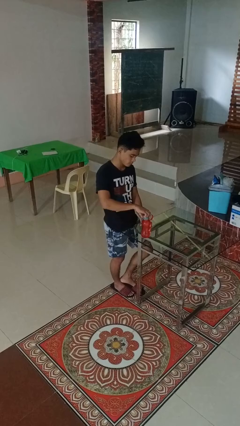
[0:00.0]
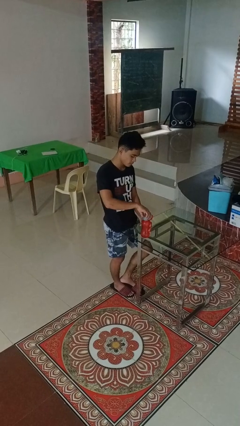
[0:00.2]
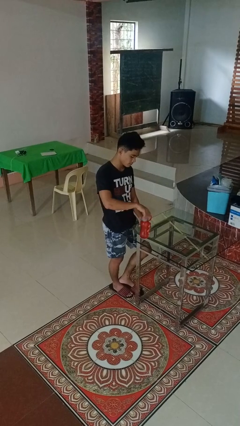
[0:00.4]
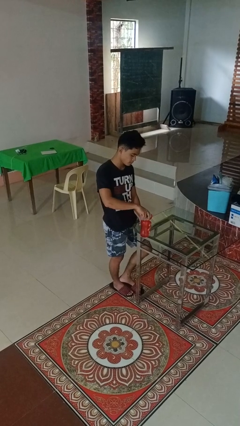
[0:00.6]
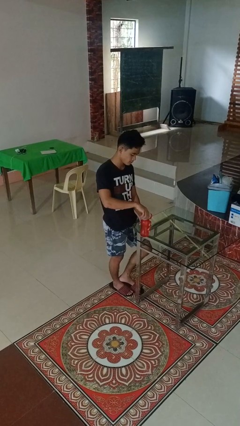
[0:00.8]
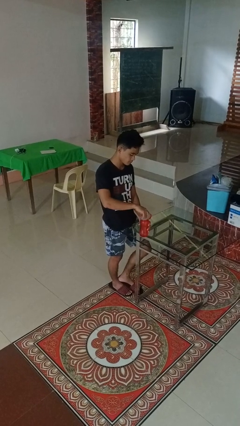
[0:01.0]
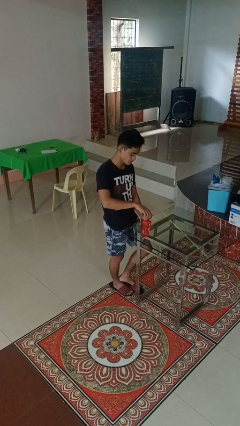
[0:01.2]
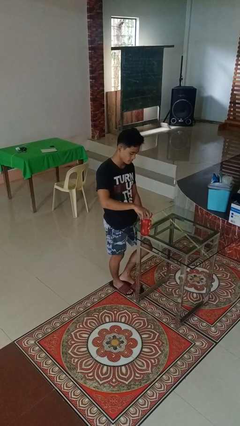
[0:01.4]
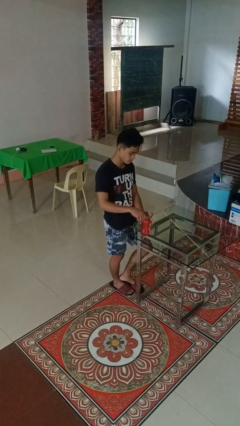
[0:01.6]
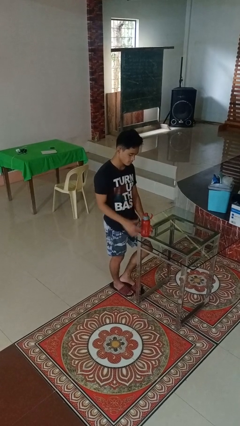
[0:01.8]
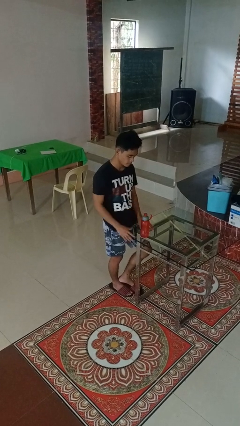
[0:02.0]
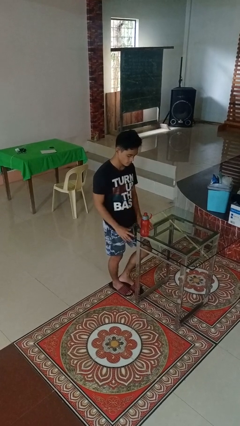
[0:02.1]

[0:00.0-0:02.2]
person screws lid to bottle

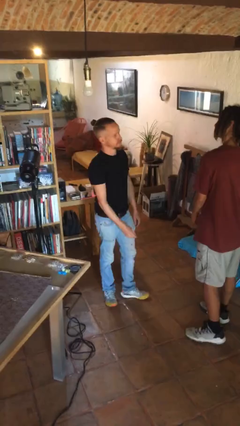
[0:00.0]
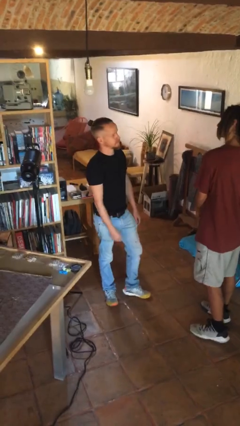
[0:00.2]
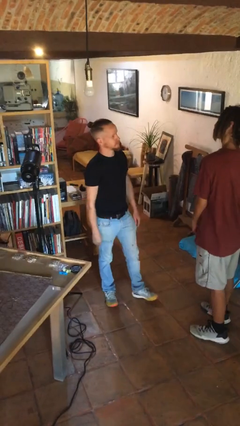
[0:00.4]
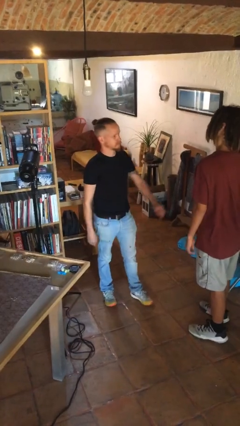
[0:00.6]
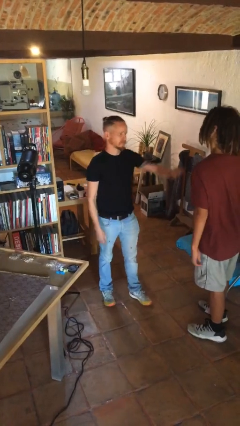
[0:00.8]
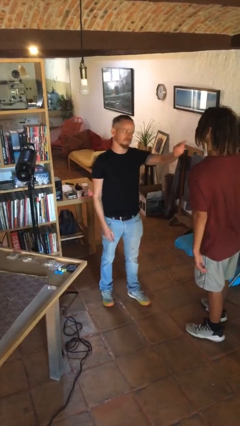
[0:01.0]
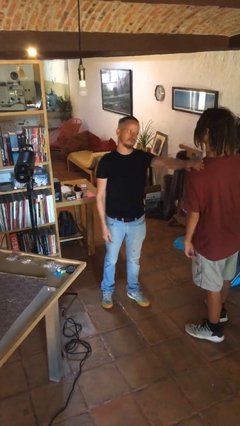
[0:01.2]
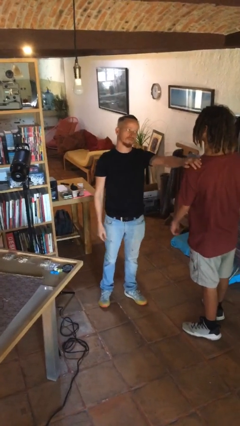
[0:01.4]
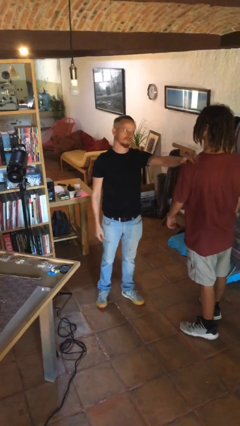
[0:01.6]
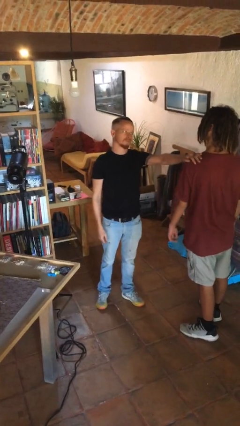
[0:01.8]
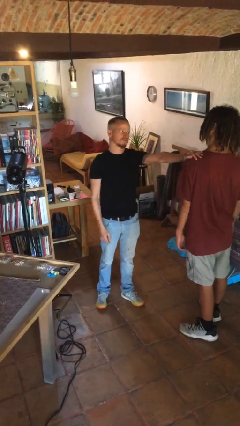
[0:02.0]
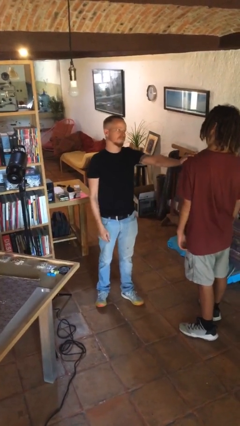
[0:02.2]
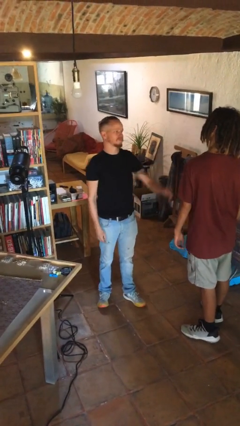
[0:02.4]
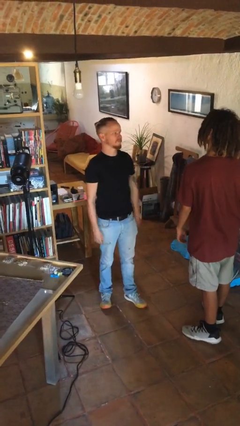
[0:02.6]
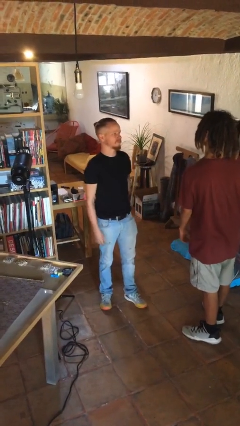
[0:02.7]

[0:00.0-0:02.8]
person pounds shoulders of person

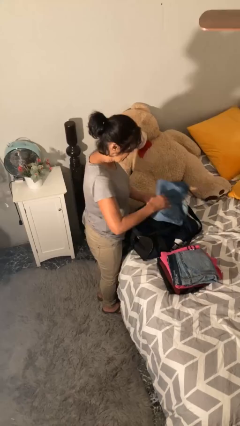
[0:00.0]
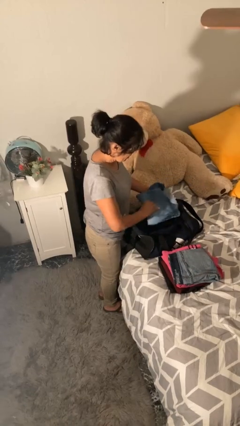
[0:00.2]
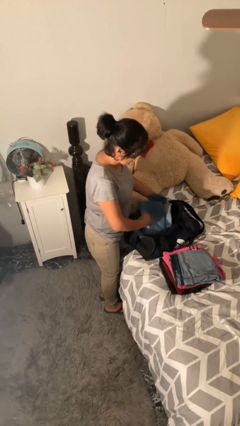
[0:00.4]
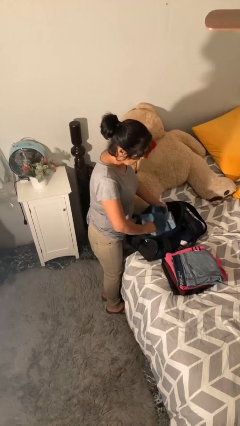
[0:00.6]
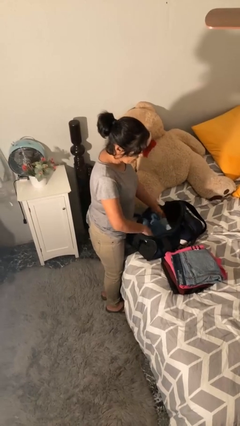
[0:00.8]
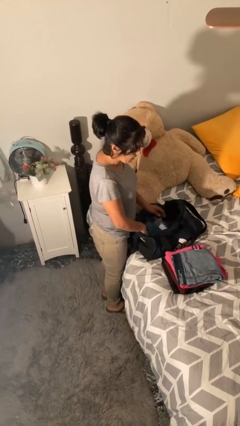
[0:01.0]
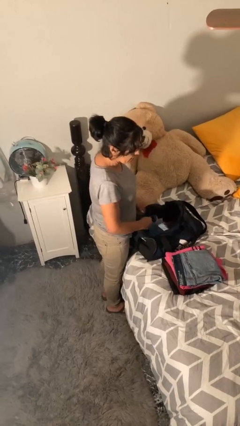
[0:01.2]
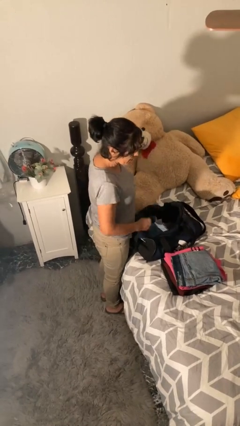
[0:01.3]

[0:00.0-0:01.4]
person loads clothes into suitcase

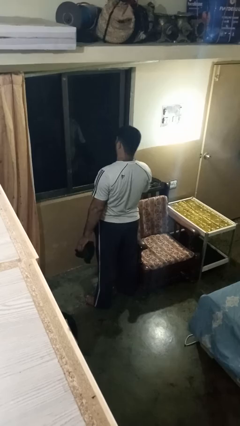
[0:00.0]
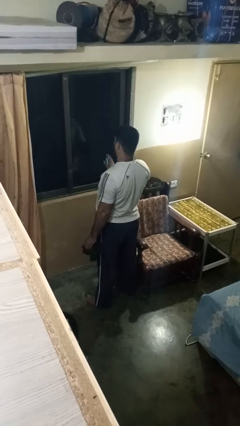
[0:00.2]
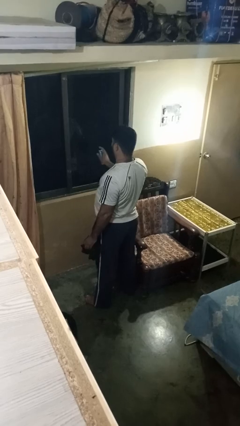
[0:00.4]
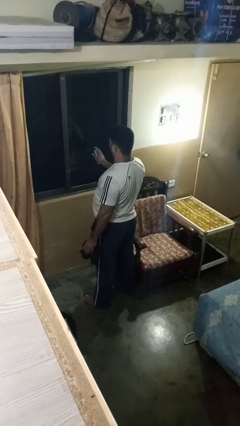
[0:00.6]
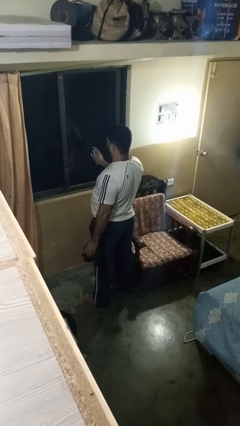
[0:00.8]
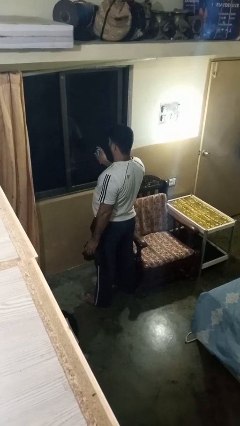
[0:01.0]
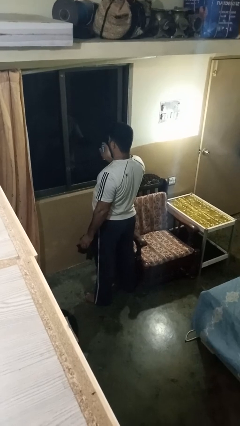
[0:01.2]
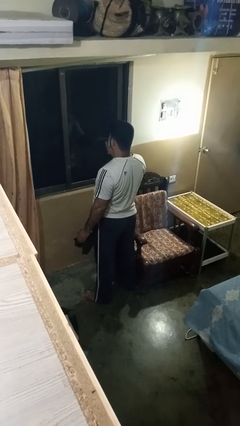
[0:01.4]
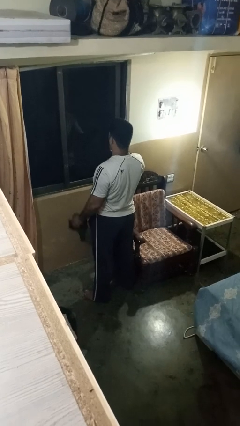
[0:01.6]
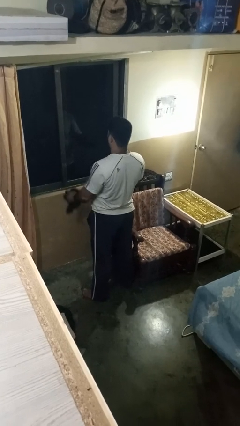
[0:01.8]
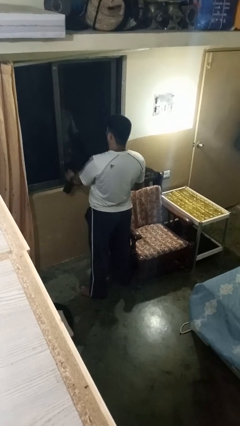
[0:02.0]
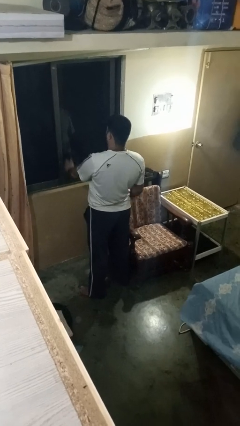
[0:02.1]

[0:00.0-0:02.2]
person sprays from bottle

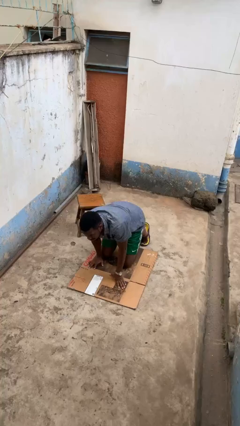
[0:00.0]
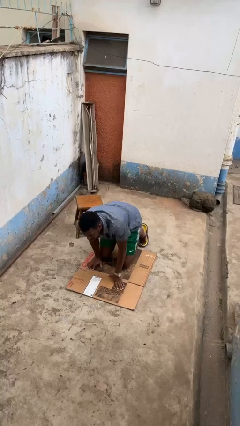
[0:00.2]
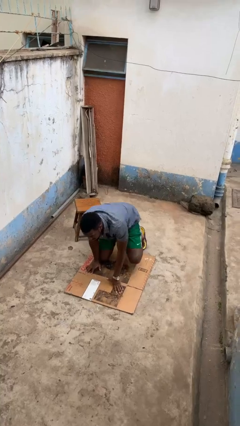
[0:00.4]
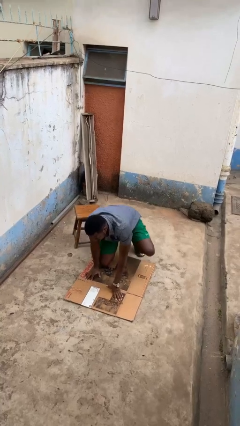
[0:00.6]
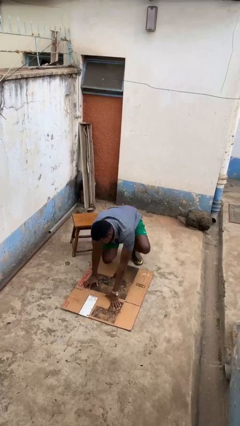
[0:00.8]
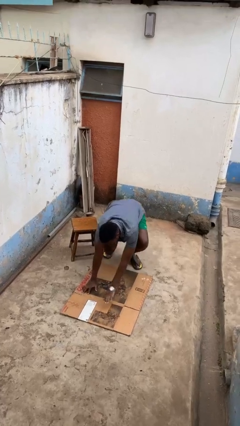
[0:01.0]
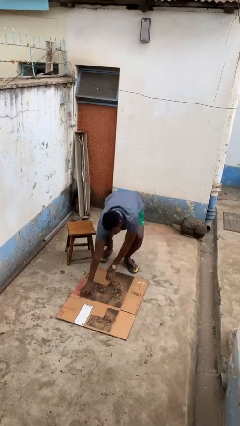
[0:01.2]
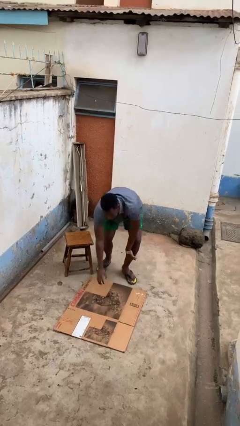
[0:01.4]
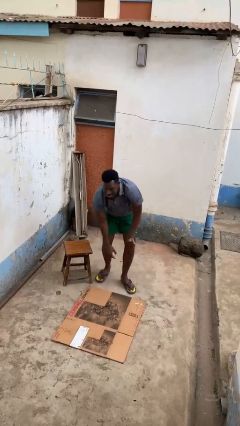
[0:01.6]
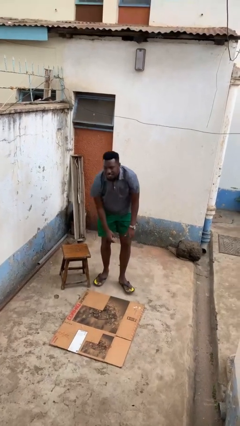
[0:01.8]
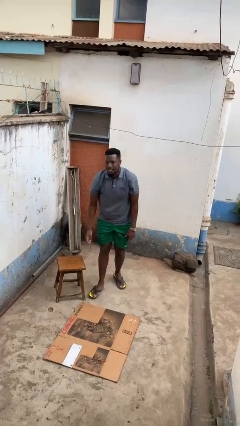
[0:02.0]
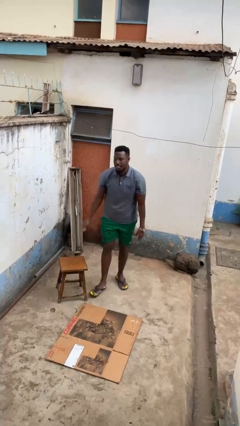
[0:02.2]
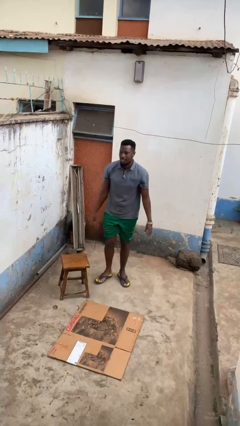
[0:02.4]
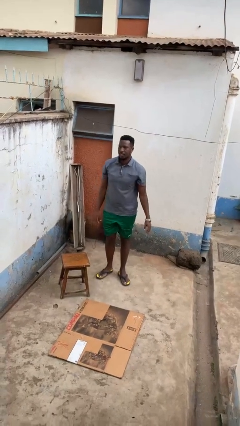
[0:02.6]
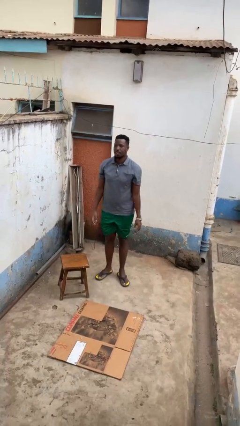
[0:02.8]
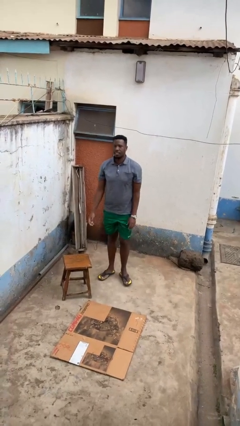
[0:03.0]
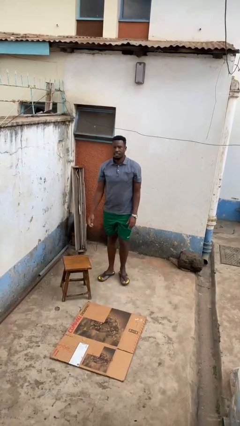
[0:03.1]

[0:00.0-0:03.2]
person stands up from floor

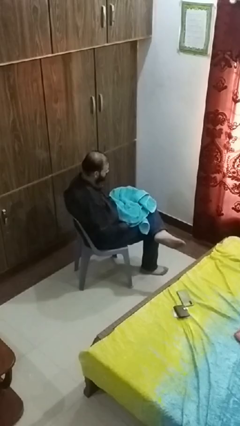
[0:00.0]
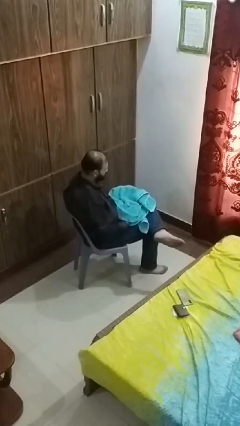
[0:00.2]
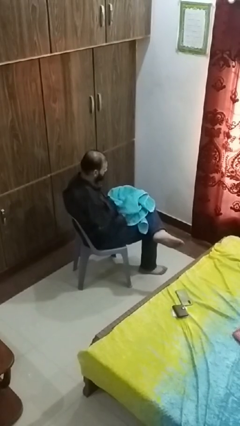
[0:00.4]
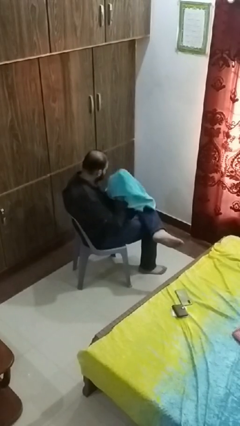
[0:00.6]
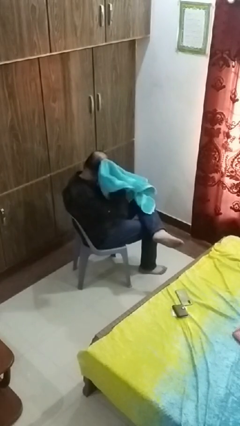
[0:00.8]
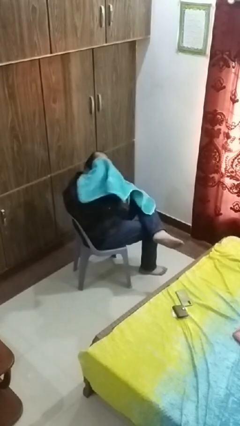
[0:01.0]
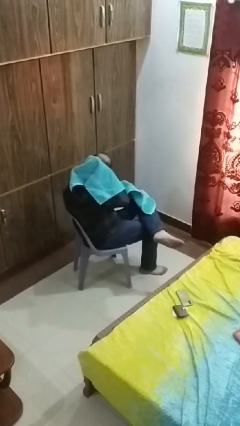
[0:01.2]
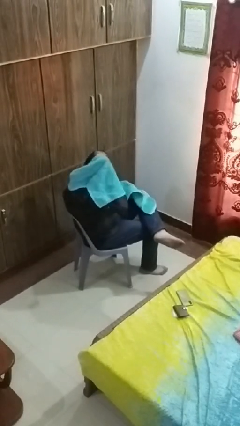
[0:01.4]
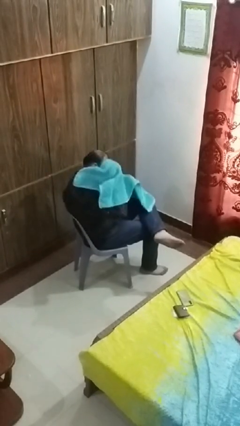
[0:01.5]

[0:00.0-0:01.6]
person dries hair with towel

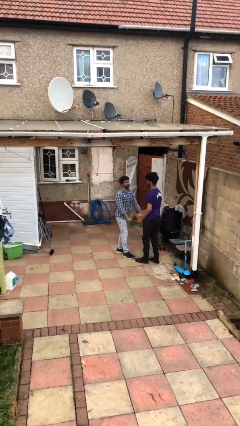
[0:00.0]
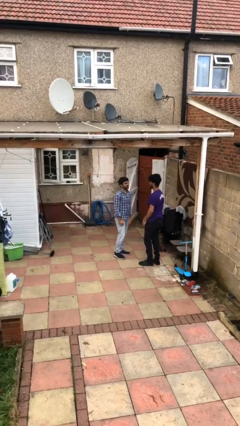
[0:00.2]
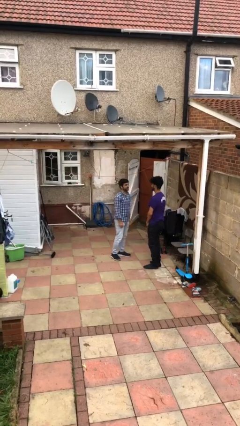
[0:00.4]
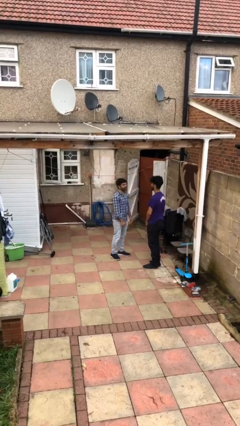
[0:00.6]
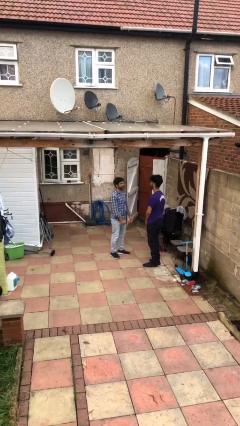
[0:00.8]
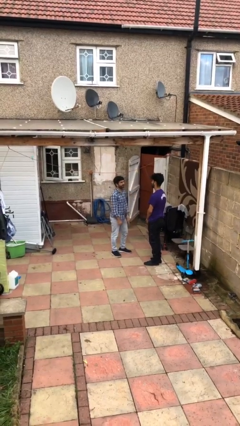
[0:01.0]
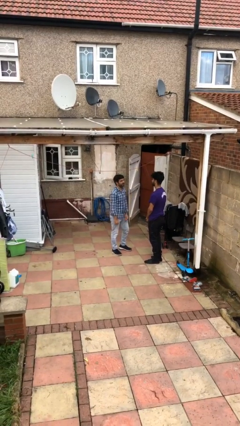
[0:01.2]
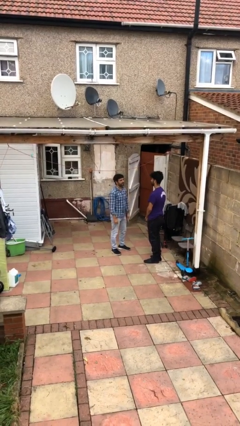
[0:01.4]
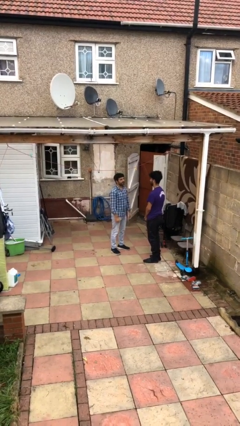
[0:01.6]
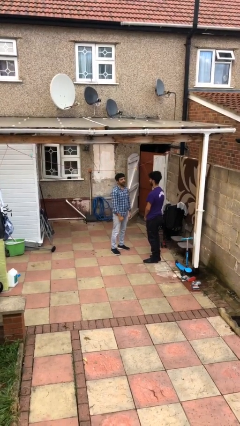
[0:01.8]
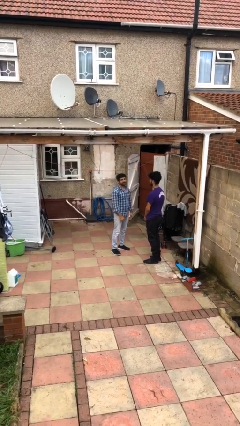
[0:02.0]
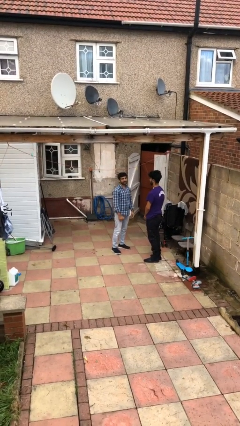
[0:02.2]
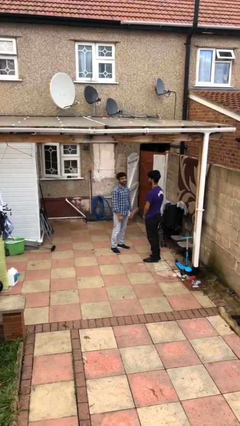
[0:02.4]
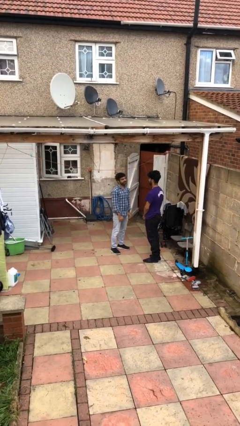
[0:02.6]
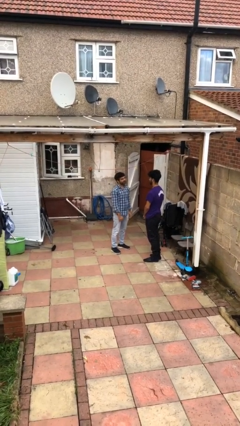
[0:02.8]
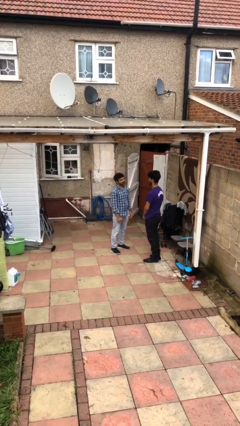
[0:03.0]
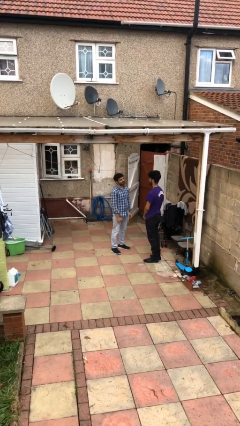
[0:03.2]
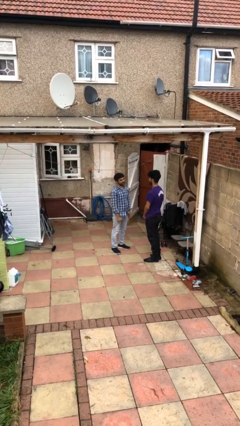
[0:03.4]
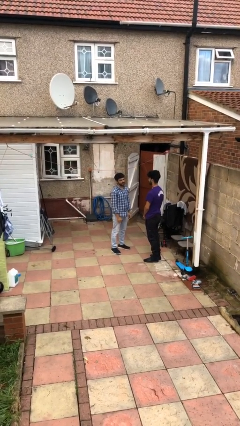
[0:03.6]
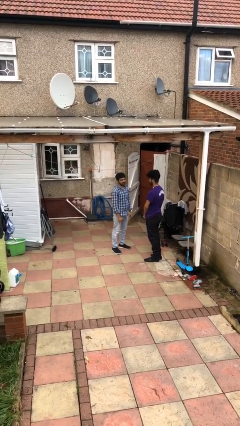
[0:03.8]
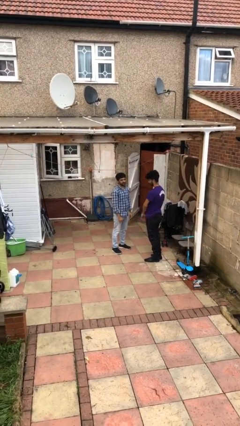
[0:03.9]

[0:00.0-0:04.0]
person talks to person
